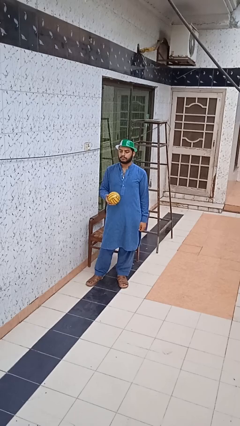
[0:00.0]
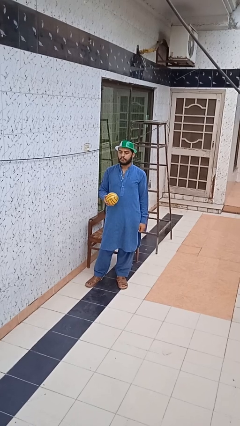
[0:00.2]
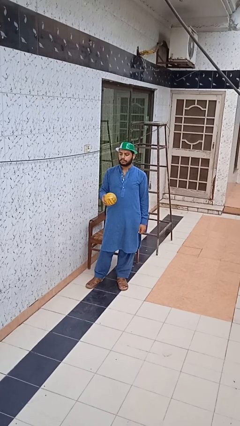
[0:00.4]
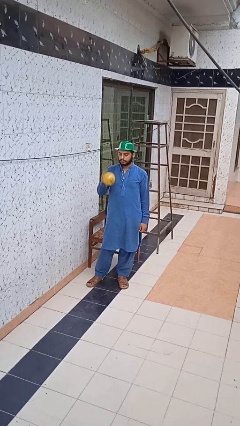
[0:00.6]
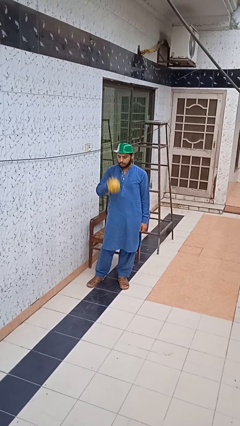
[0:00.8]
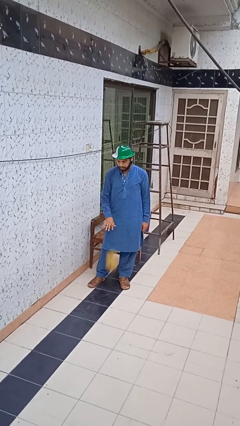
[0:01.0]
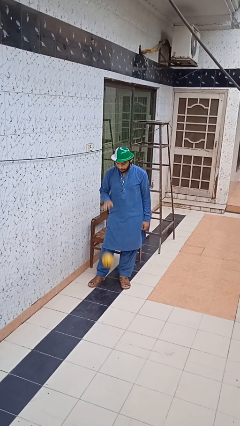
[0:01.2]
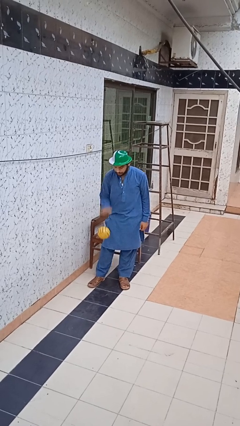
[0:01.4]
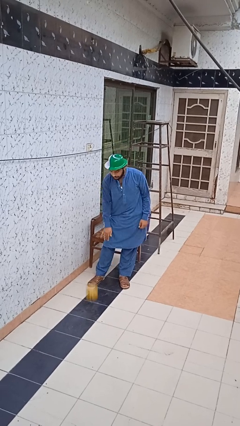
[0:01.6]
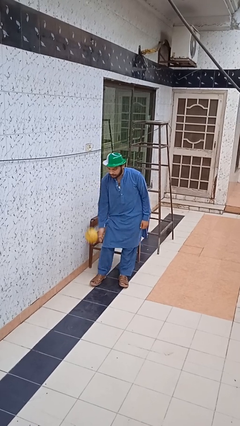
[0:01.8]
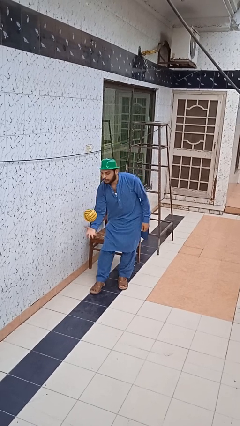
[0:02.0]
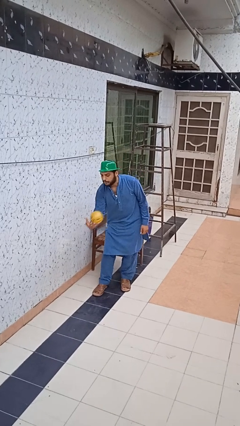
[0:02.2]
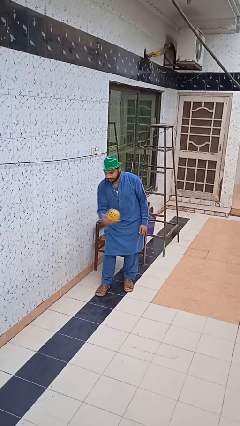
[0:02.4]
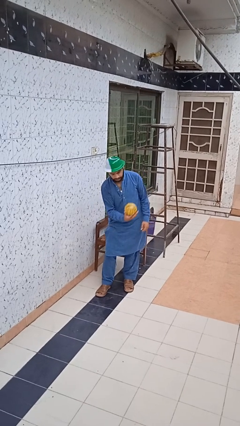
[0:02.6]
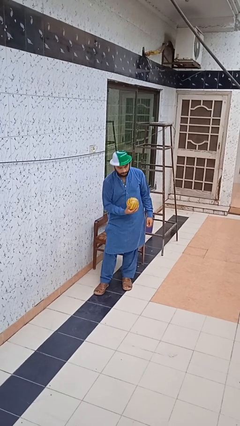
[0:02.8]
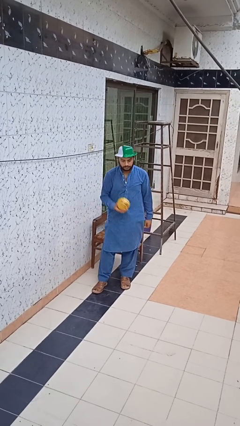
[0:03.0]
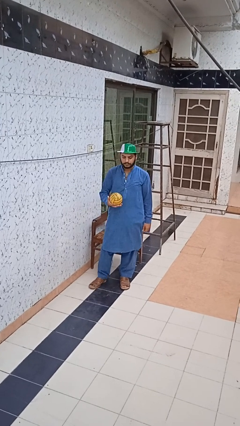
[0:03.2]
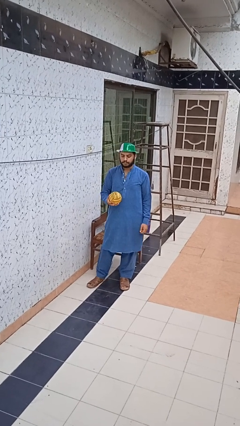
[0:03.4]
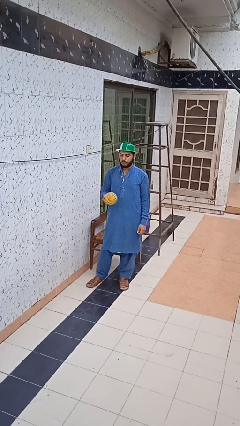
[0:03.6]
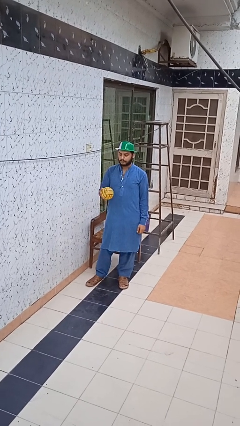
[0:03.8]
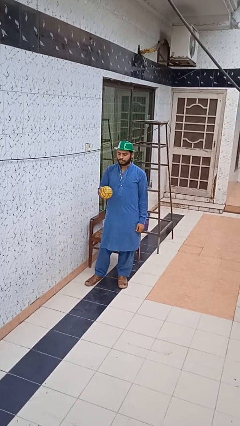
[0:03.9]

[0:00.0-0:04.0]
person bounces ball on floor

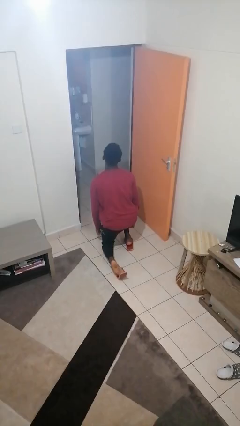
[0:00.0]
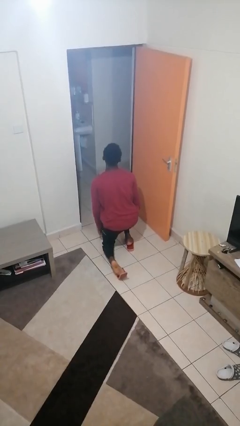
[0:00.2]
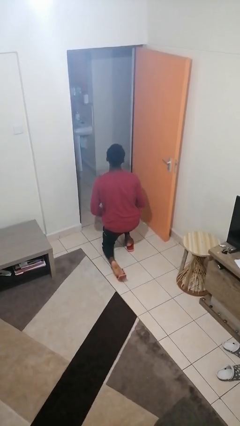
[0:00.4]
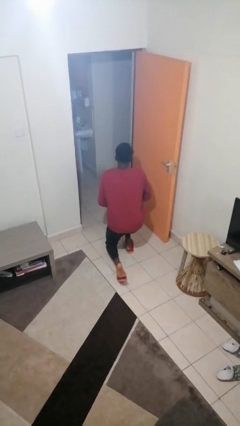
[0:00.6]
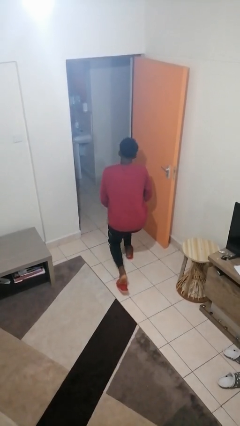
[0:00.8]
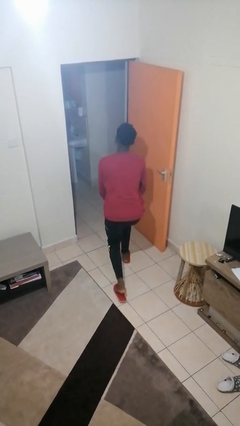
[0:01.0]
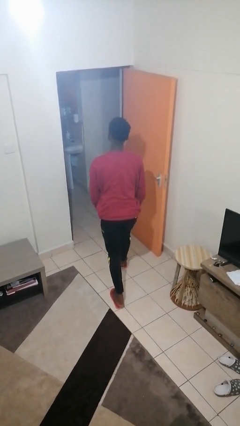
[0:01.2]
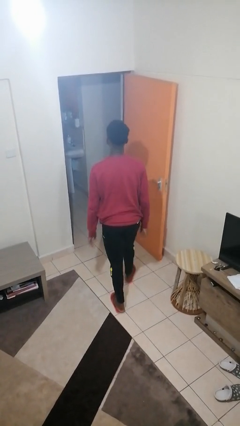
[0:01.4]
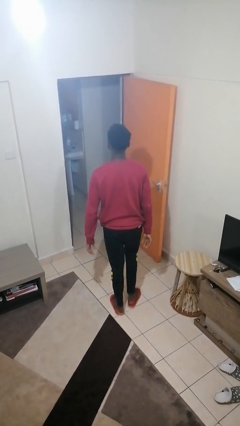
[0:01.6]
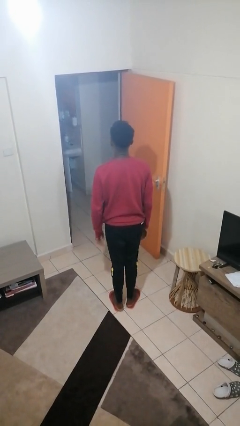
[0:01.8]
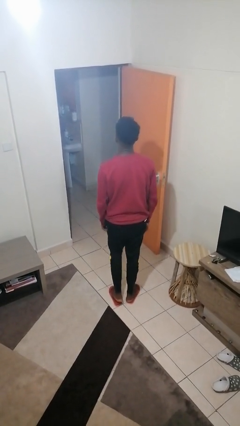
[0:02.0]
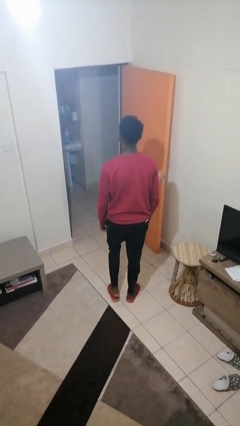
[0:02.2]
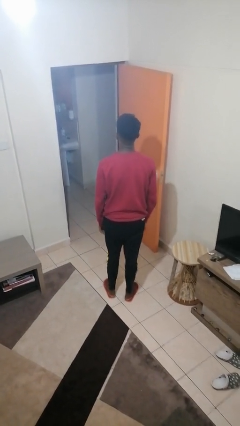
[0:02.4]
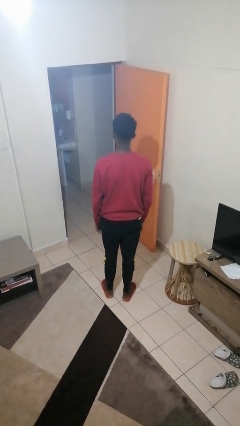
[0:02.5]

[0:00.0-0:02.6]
person stands up from floor

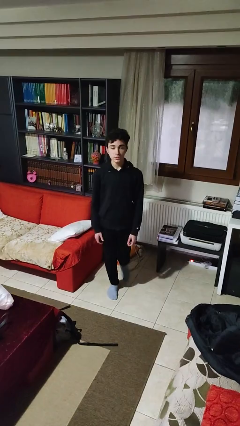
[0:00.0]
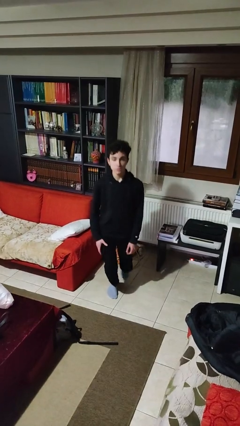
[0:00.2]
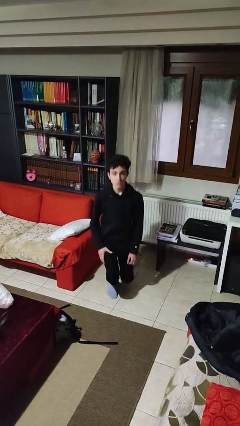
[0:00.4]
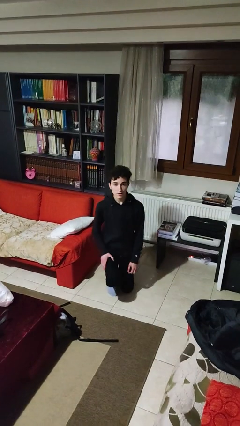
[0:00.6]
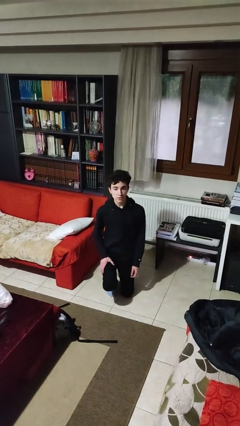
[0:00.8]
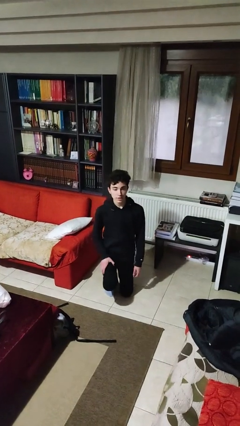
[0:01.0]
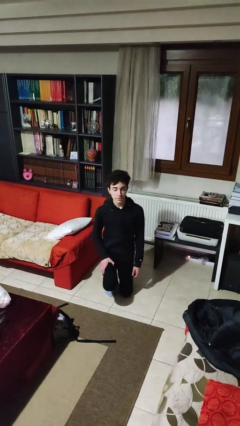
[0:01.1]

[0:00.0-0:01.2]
person kneels

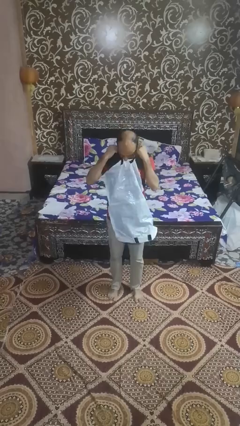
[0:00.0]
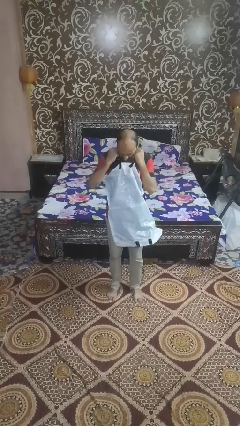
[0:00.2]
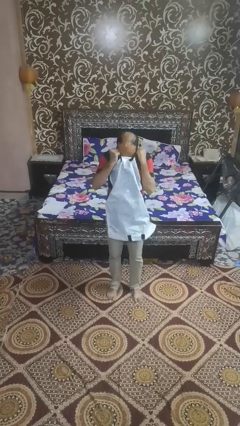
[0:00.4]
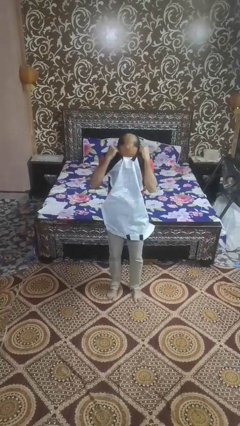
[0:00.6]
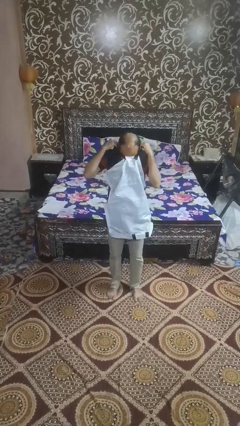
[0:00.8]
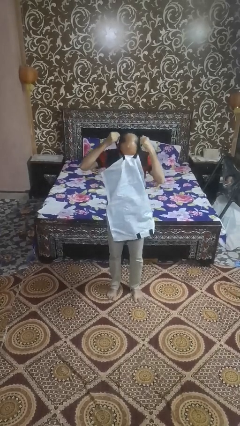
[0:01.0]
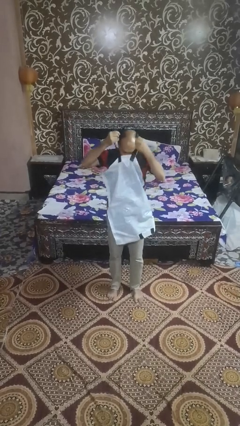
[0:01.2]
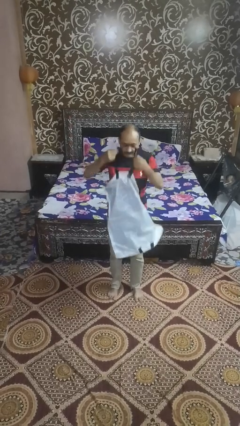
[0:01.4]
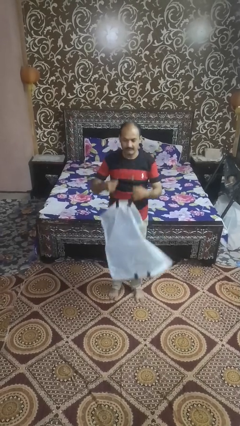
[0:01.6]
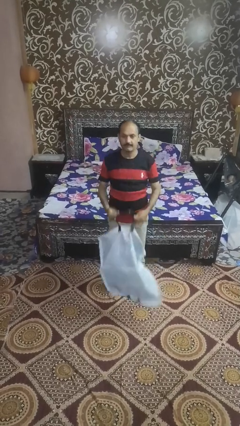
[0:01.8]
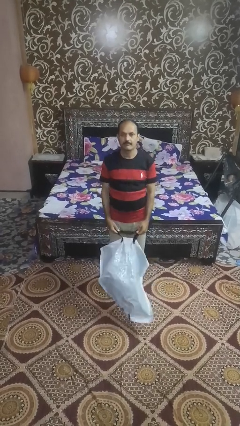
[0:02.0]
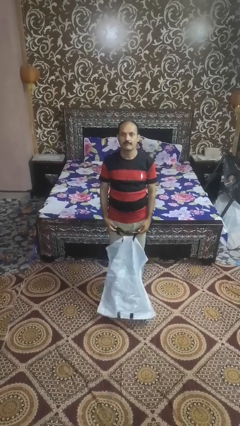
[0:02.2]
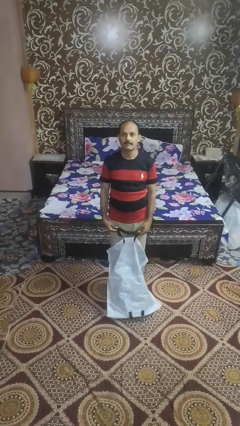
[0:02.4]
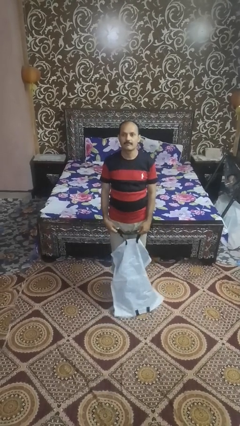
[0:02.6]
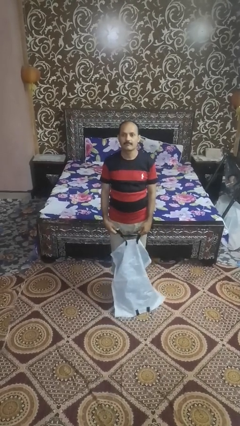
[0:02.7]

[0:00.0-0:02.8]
person tears paper

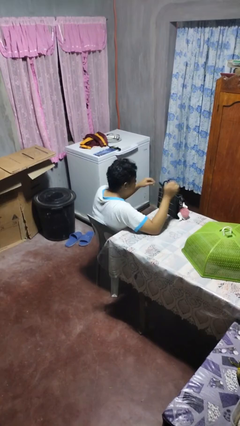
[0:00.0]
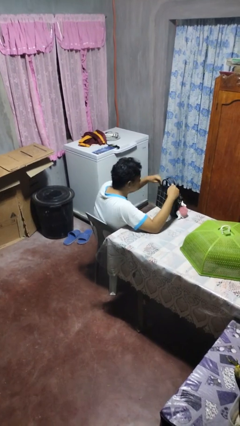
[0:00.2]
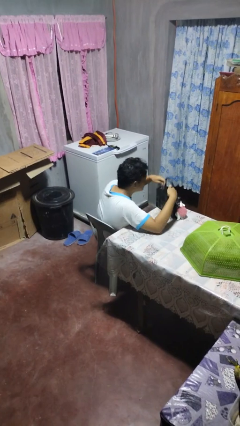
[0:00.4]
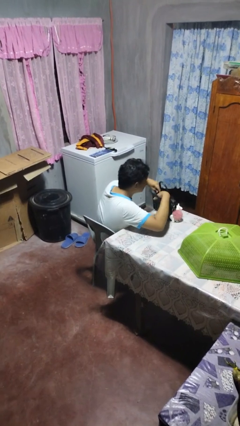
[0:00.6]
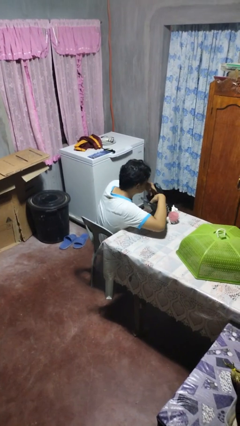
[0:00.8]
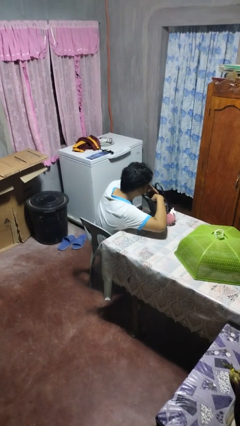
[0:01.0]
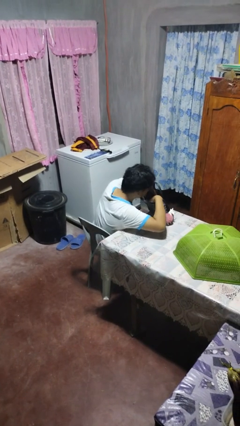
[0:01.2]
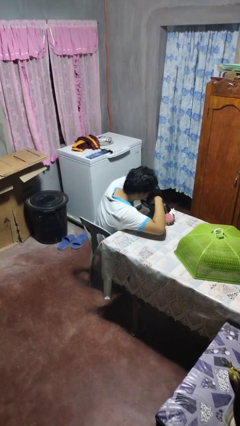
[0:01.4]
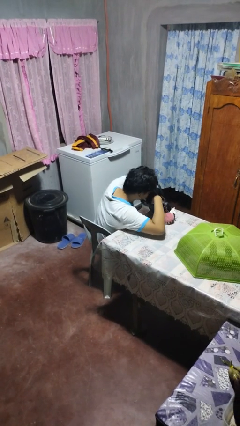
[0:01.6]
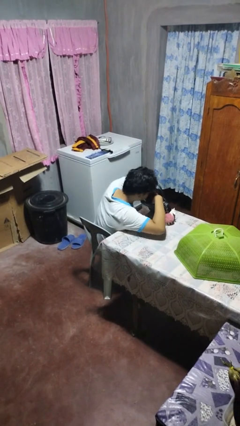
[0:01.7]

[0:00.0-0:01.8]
person searches in purse

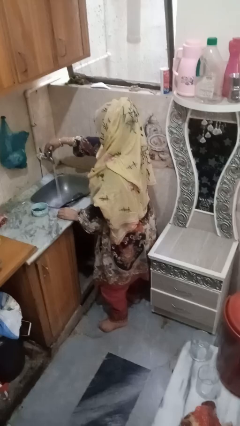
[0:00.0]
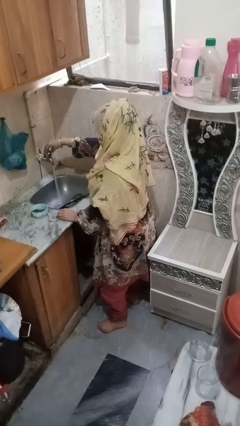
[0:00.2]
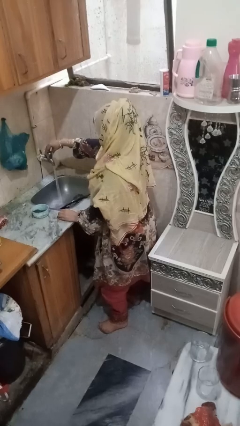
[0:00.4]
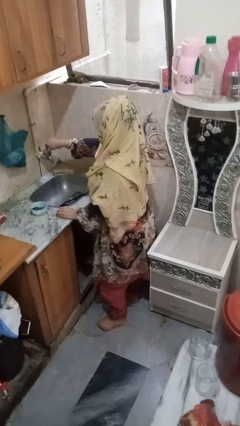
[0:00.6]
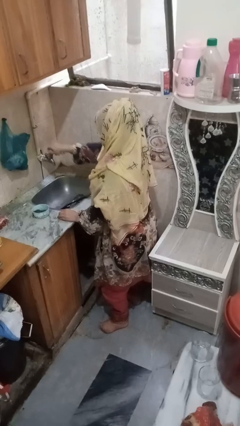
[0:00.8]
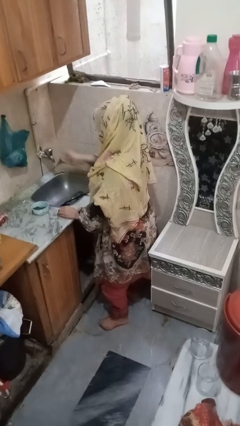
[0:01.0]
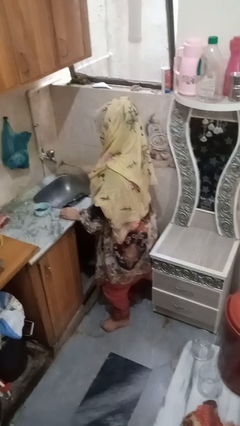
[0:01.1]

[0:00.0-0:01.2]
person turns off faucet

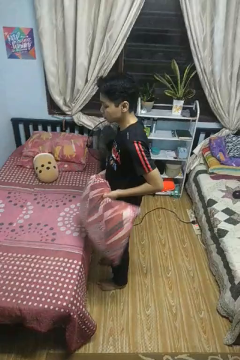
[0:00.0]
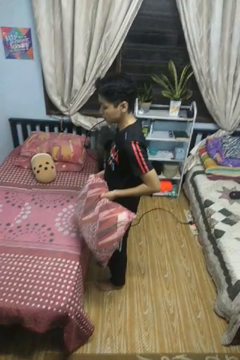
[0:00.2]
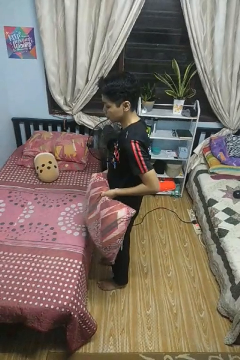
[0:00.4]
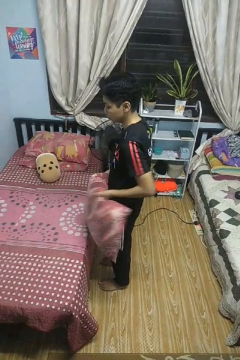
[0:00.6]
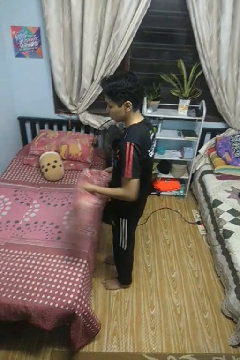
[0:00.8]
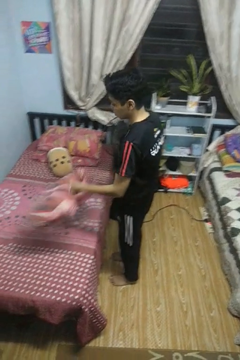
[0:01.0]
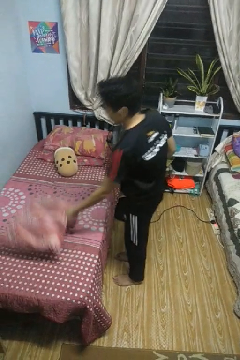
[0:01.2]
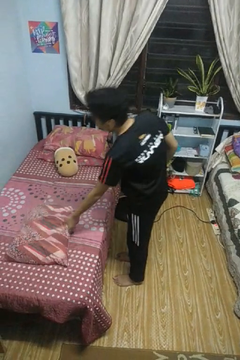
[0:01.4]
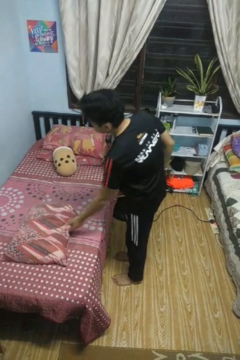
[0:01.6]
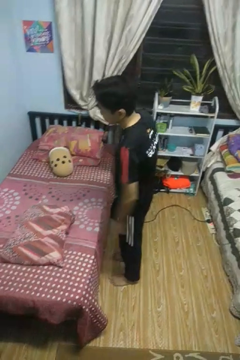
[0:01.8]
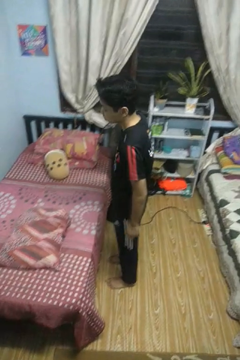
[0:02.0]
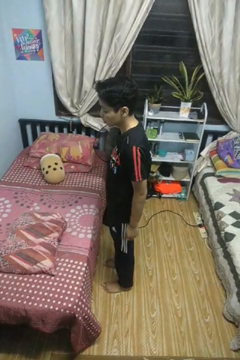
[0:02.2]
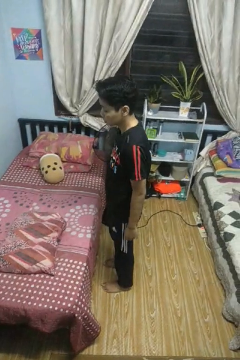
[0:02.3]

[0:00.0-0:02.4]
person puts down object on bed

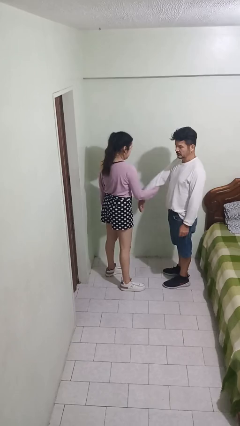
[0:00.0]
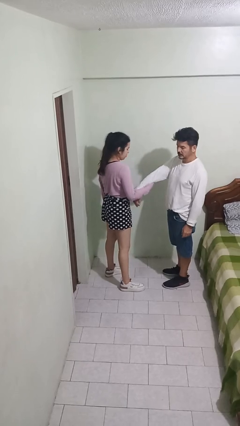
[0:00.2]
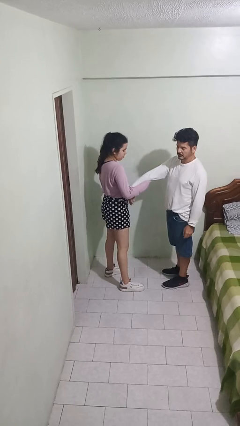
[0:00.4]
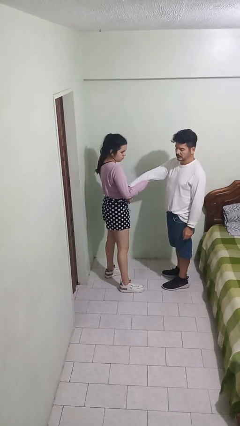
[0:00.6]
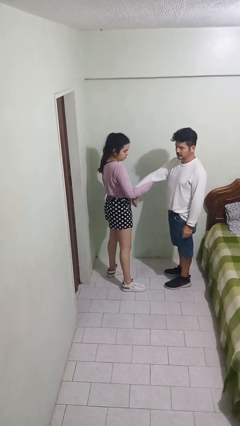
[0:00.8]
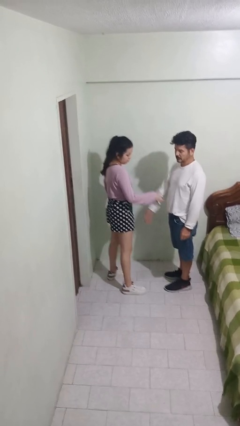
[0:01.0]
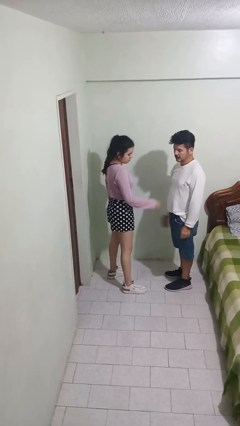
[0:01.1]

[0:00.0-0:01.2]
person grabs person by forearm
